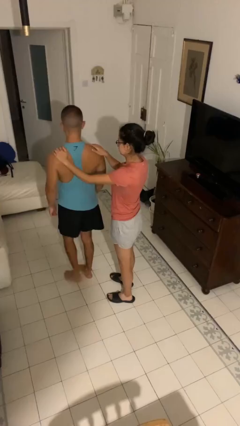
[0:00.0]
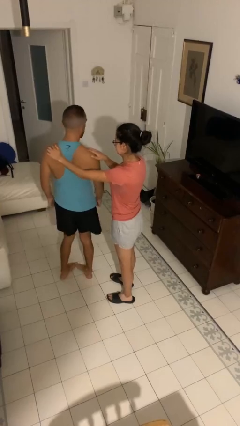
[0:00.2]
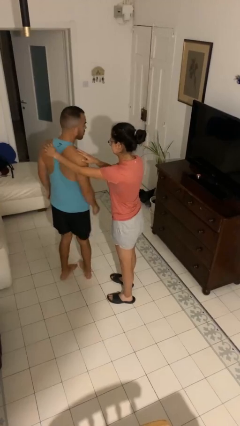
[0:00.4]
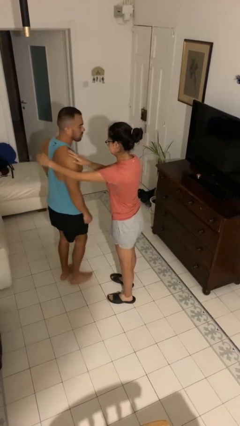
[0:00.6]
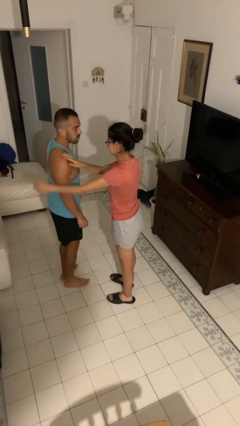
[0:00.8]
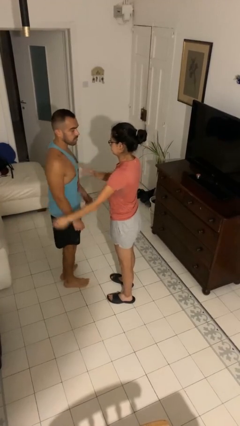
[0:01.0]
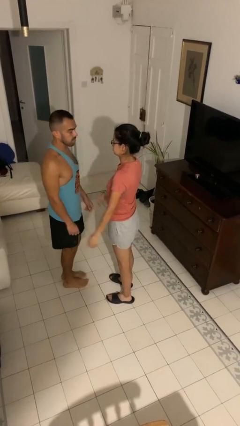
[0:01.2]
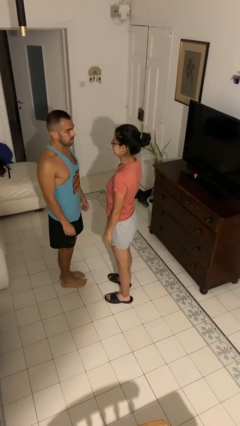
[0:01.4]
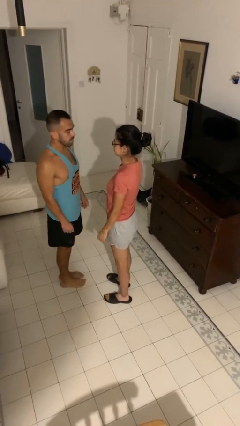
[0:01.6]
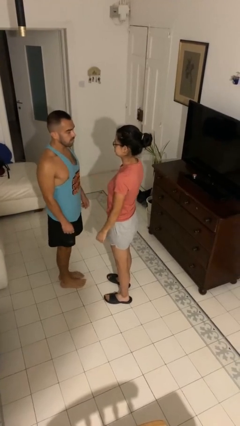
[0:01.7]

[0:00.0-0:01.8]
person spins person around

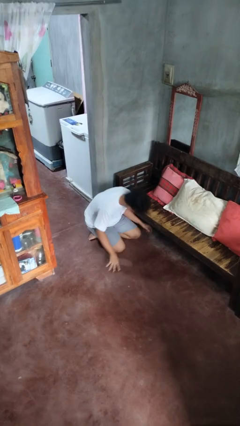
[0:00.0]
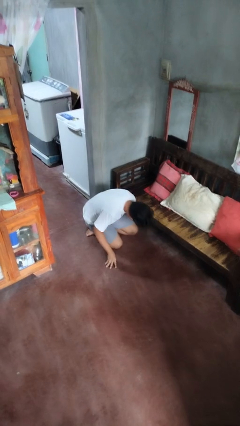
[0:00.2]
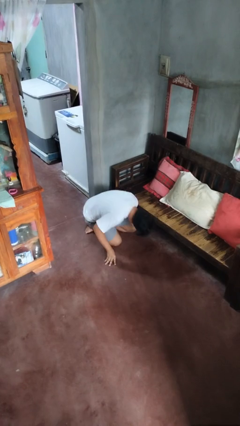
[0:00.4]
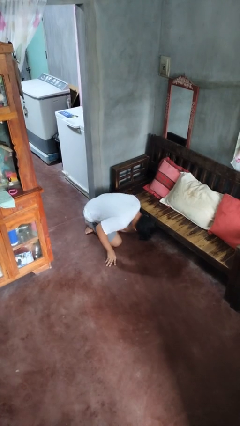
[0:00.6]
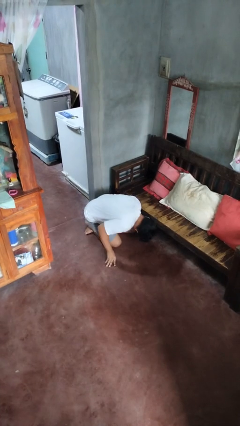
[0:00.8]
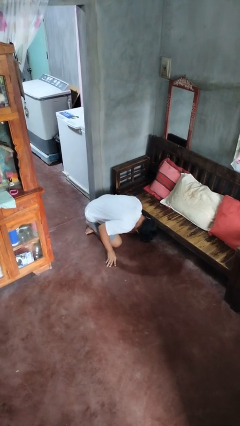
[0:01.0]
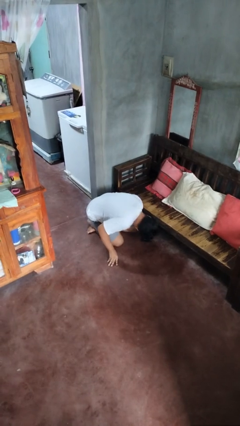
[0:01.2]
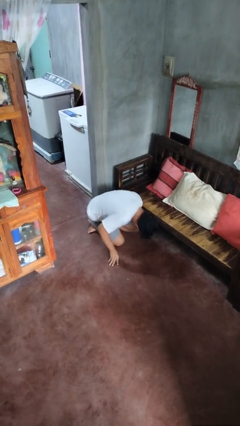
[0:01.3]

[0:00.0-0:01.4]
person searches under couch

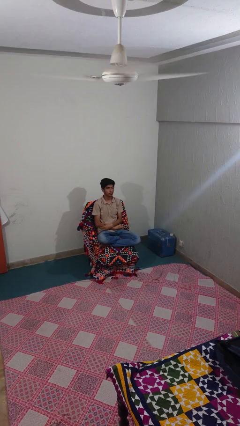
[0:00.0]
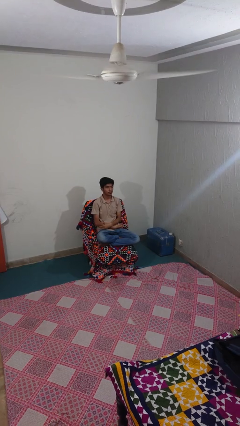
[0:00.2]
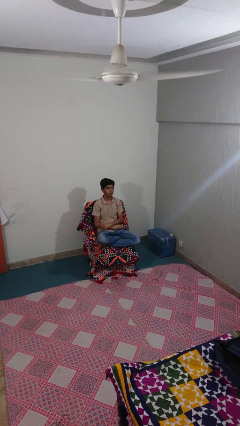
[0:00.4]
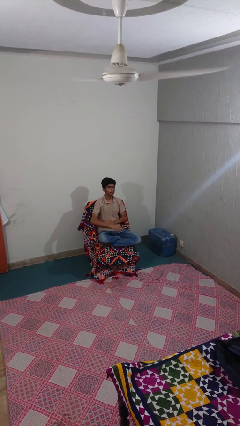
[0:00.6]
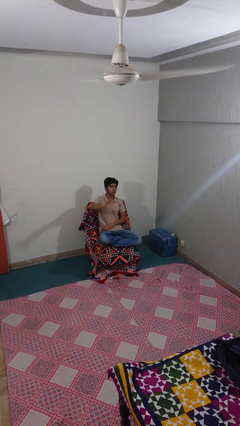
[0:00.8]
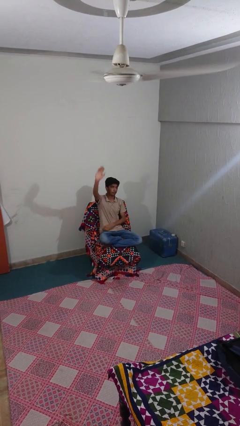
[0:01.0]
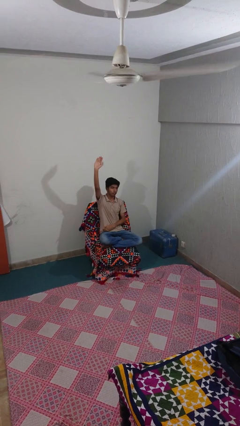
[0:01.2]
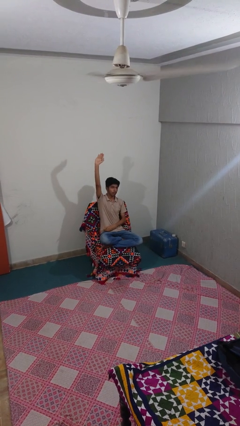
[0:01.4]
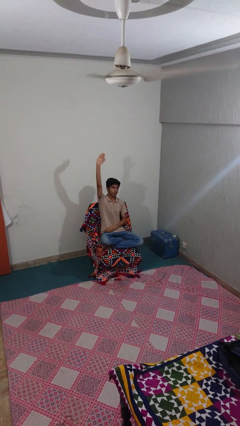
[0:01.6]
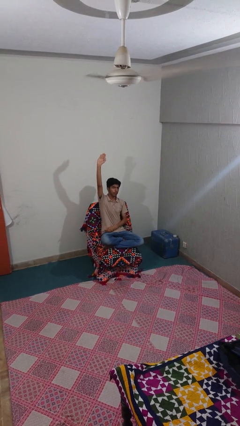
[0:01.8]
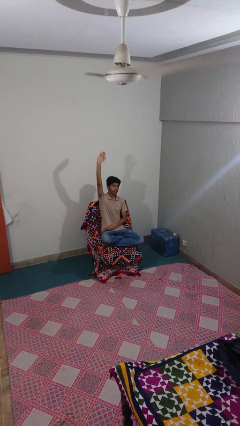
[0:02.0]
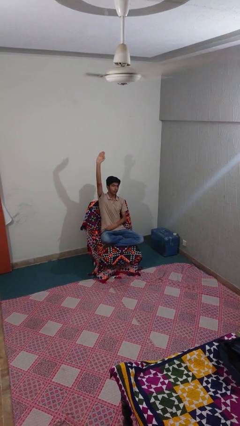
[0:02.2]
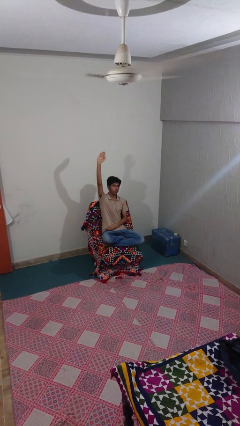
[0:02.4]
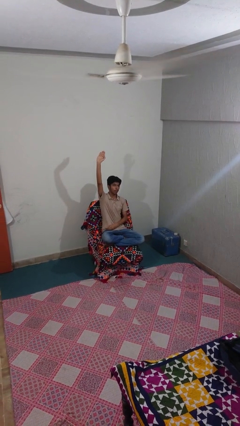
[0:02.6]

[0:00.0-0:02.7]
person gestures raise hand

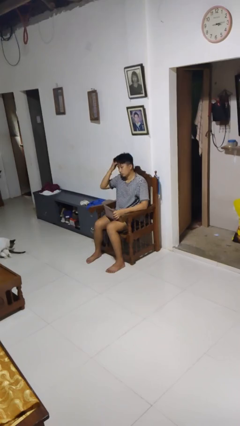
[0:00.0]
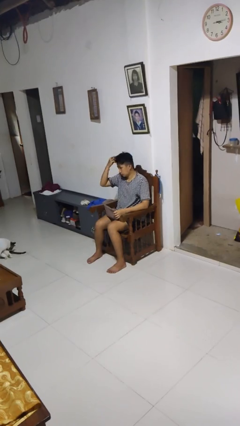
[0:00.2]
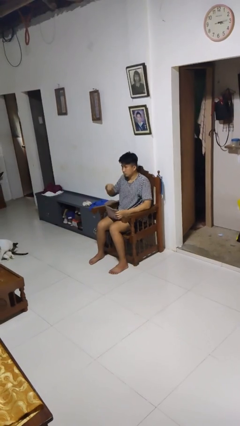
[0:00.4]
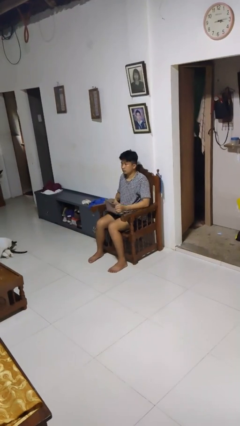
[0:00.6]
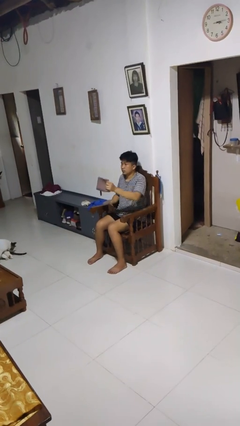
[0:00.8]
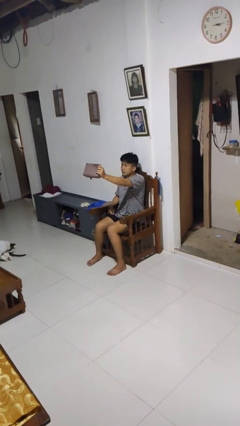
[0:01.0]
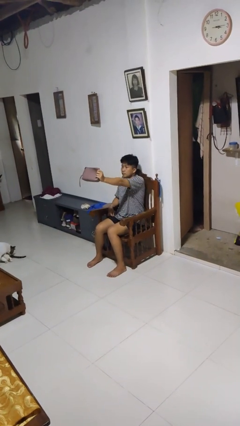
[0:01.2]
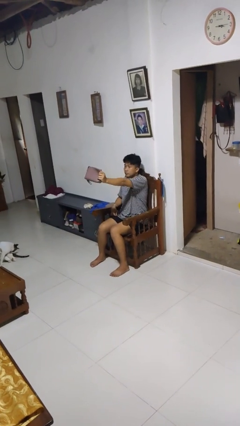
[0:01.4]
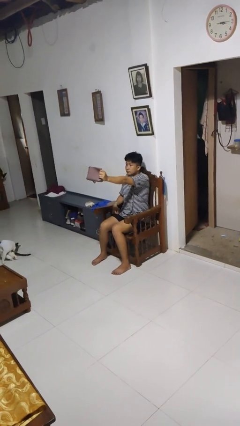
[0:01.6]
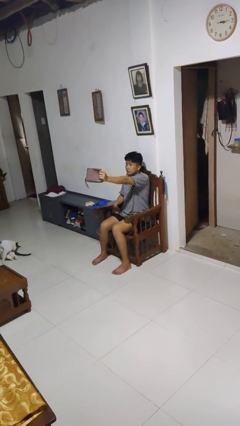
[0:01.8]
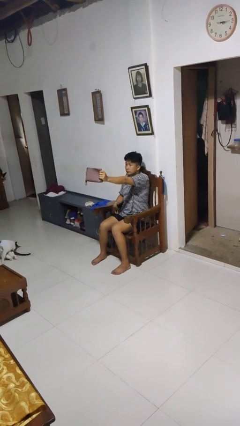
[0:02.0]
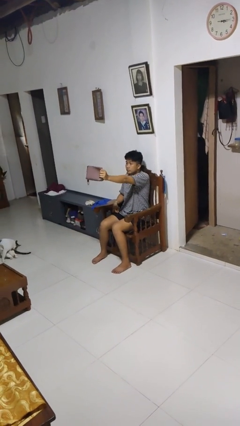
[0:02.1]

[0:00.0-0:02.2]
person holds object above head

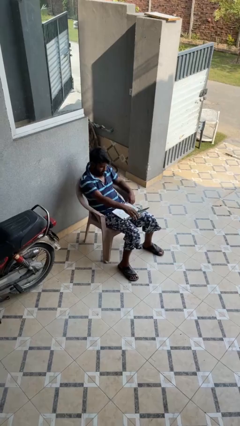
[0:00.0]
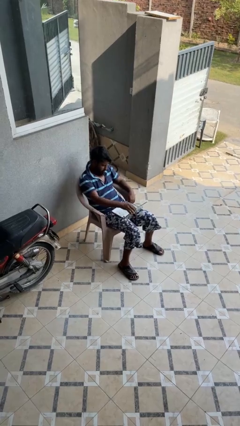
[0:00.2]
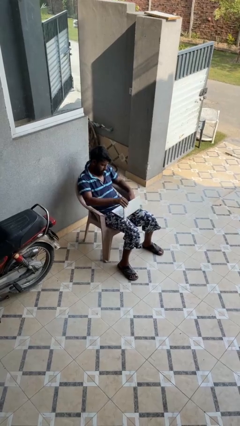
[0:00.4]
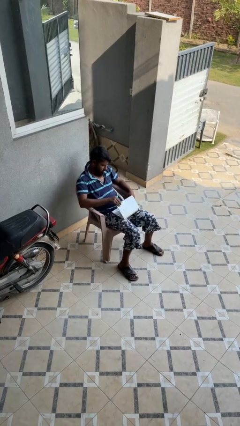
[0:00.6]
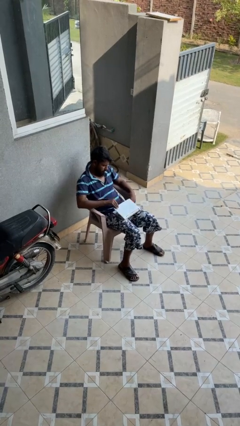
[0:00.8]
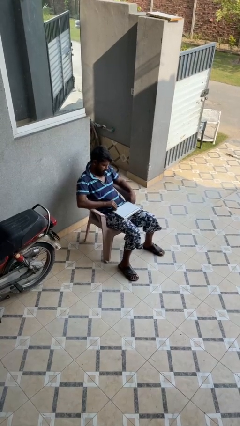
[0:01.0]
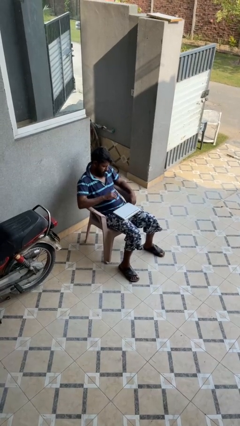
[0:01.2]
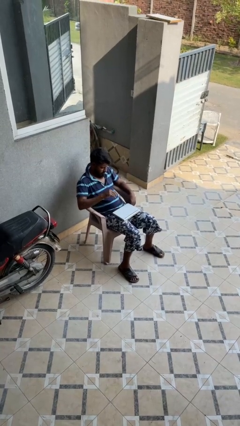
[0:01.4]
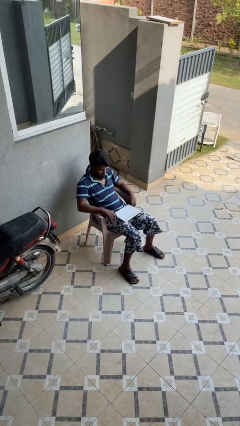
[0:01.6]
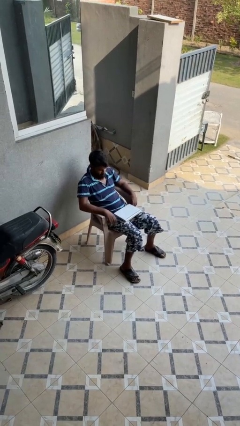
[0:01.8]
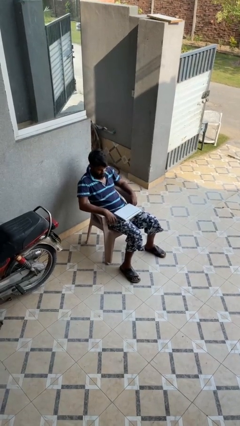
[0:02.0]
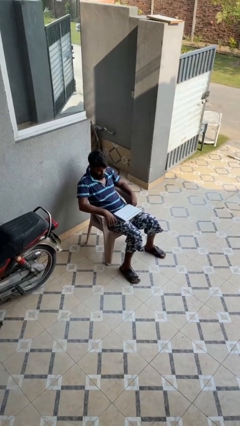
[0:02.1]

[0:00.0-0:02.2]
person closes laptop

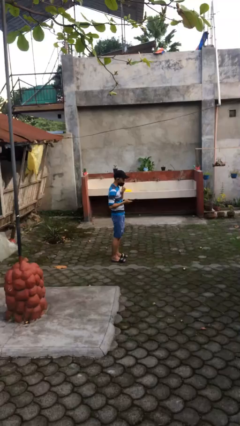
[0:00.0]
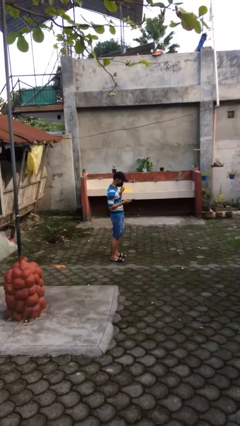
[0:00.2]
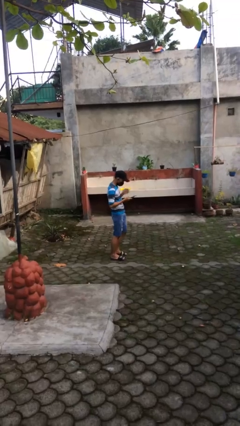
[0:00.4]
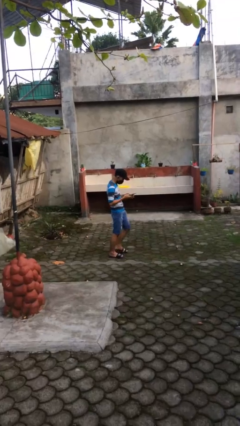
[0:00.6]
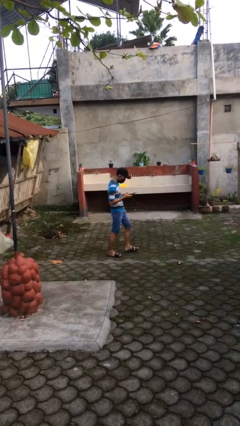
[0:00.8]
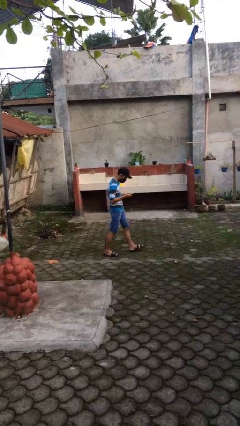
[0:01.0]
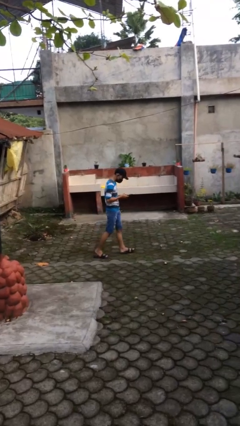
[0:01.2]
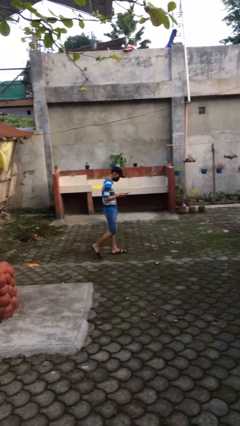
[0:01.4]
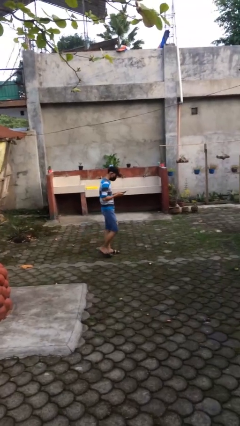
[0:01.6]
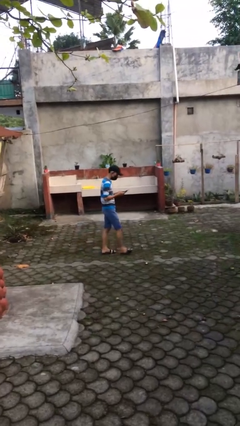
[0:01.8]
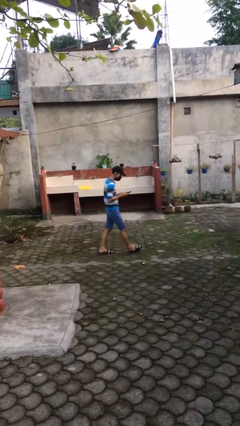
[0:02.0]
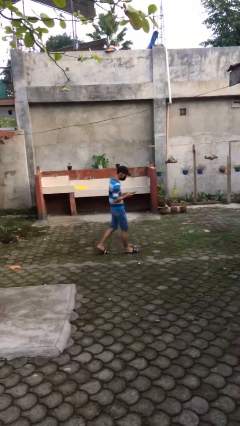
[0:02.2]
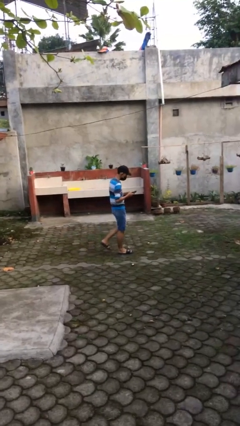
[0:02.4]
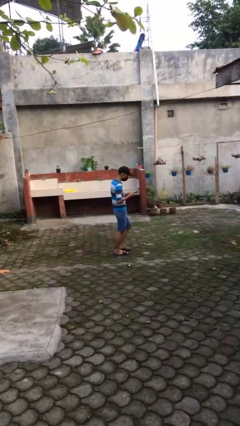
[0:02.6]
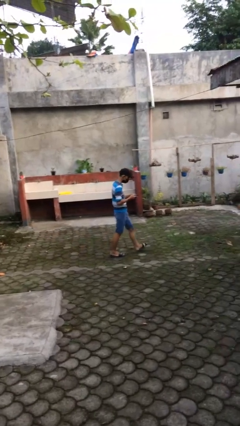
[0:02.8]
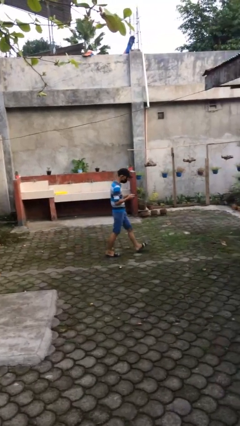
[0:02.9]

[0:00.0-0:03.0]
person texts on phone

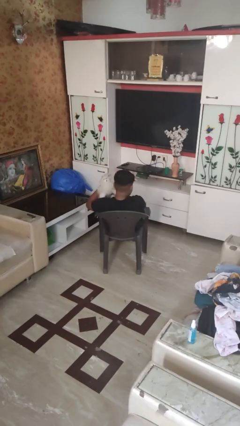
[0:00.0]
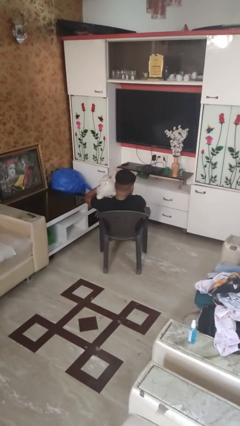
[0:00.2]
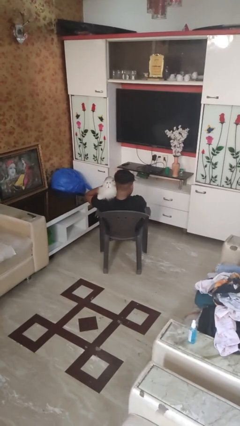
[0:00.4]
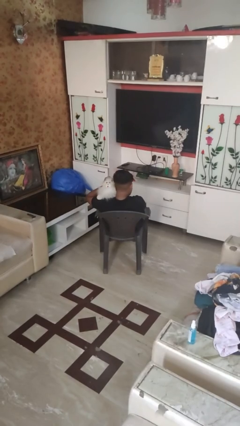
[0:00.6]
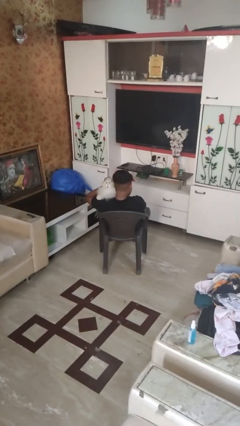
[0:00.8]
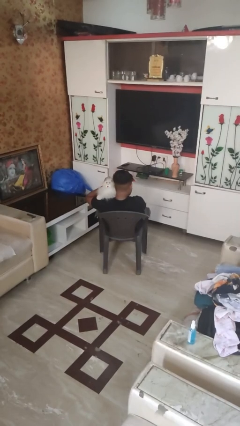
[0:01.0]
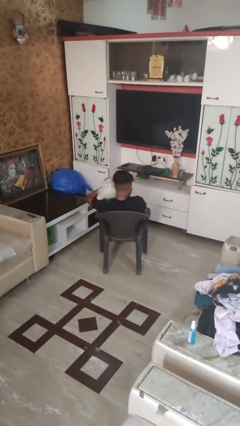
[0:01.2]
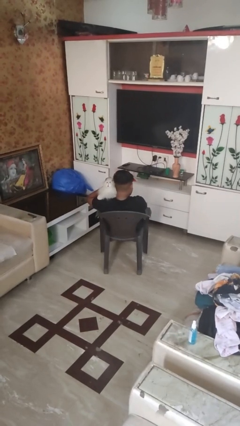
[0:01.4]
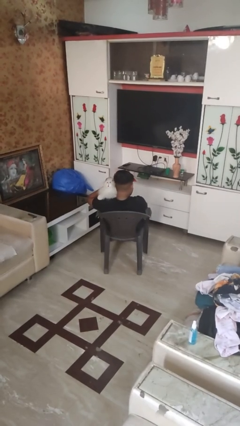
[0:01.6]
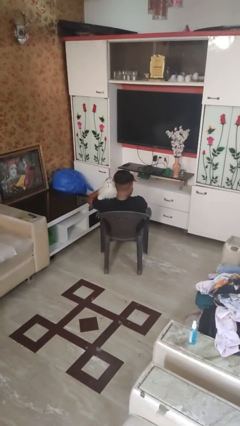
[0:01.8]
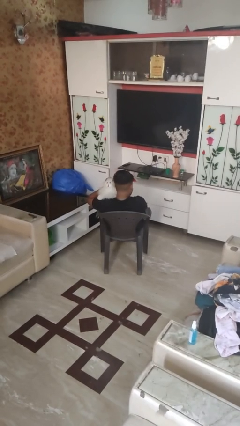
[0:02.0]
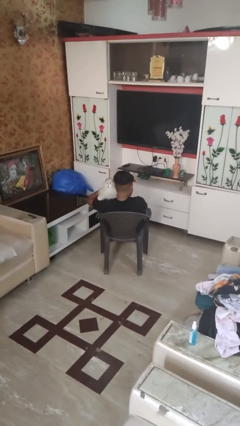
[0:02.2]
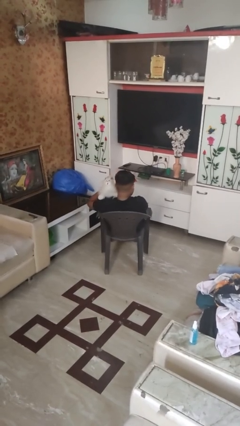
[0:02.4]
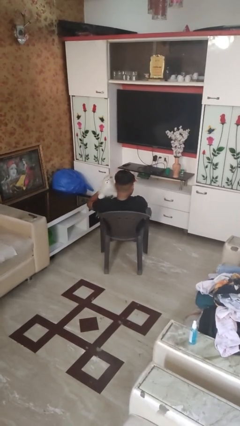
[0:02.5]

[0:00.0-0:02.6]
person hugs stuffed animal

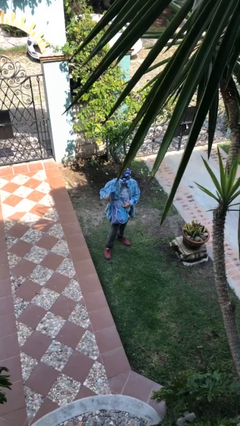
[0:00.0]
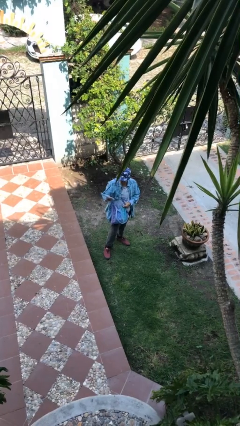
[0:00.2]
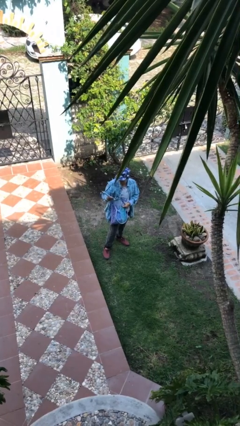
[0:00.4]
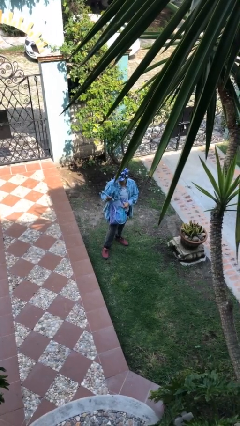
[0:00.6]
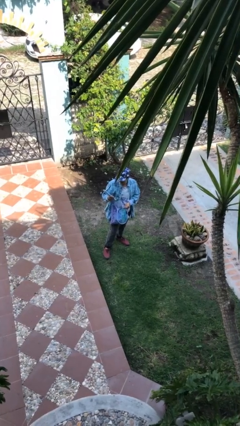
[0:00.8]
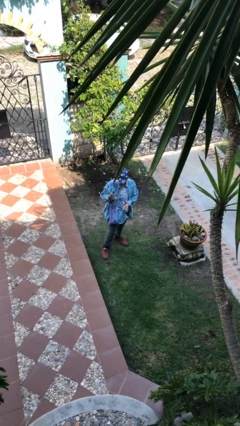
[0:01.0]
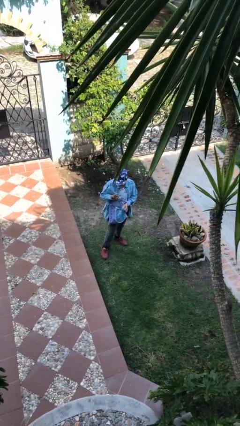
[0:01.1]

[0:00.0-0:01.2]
person takes object from purse
